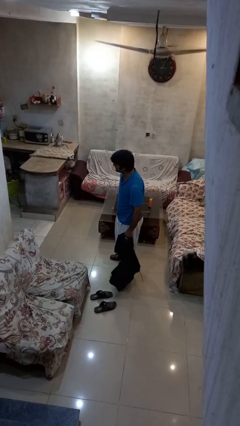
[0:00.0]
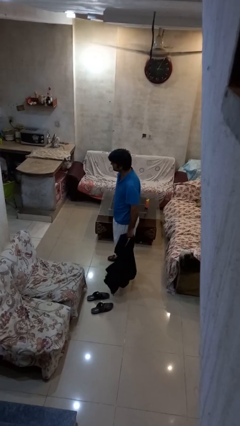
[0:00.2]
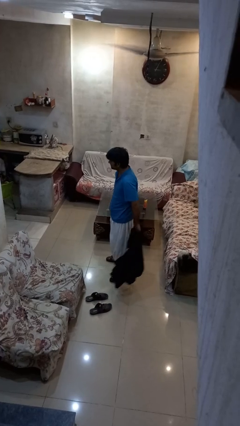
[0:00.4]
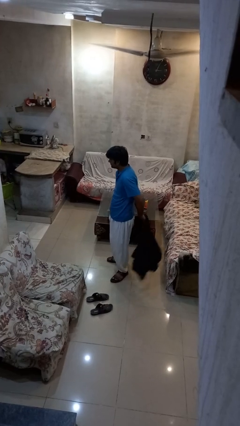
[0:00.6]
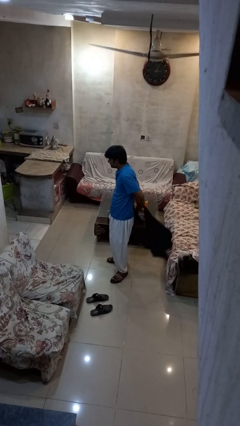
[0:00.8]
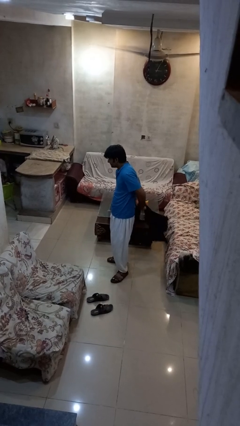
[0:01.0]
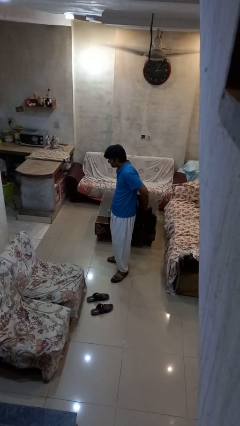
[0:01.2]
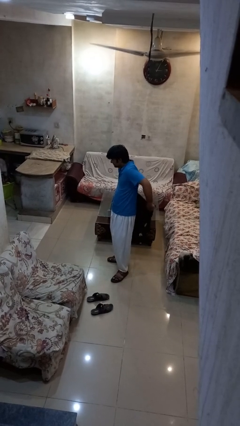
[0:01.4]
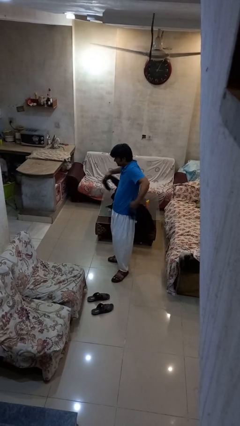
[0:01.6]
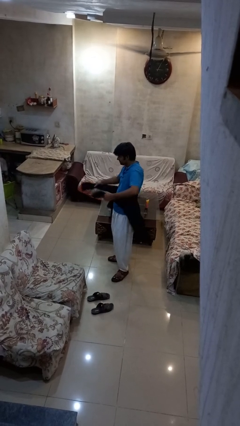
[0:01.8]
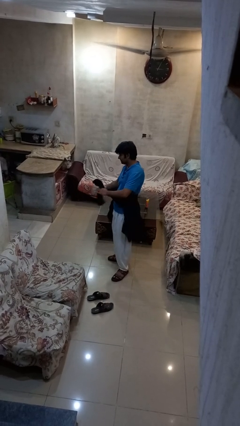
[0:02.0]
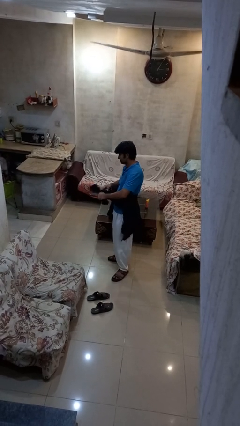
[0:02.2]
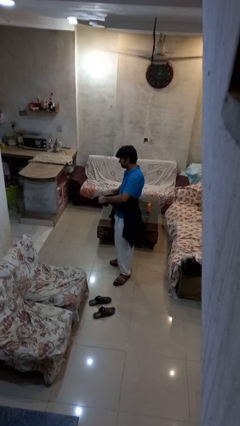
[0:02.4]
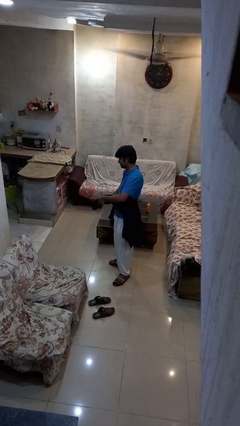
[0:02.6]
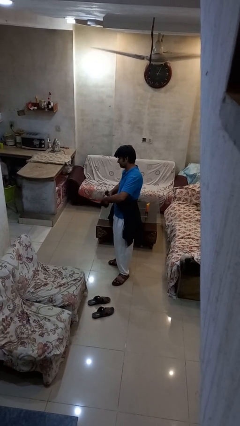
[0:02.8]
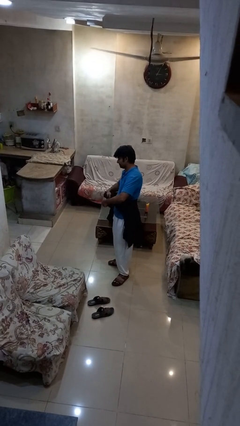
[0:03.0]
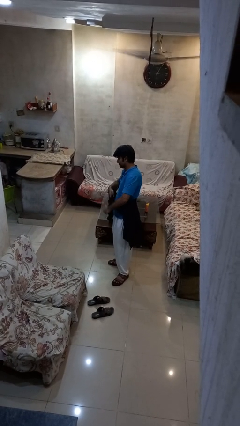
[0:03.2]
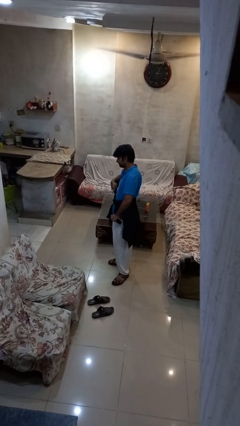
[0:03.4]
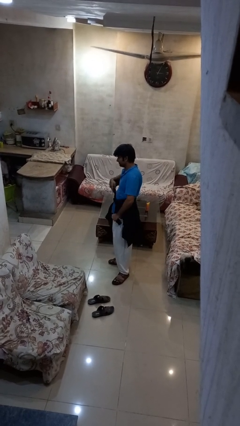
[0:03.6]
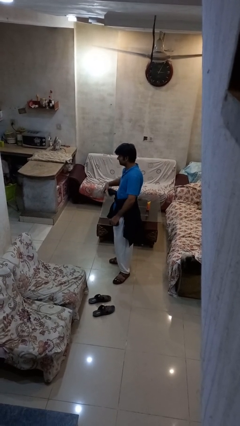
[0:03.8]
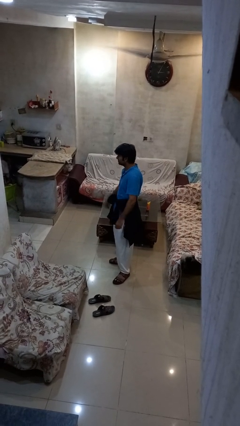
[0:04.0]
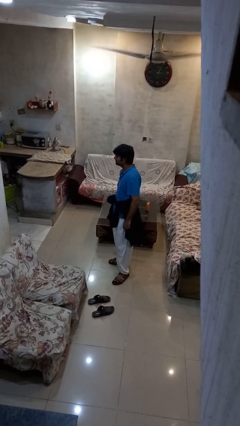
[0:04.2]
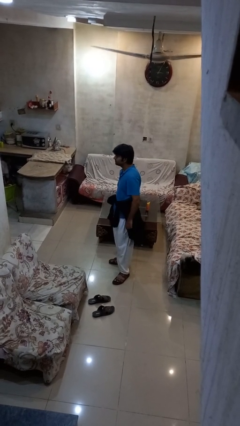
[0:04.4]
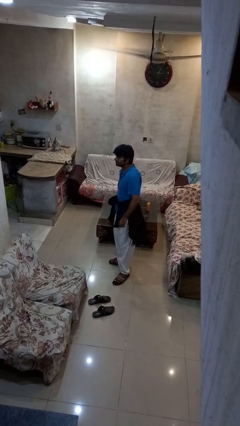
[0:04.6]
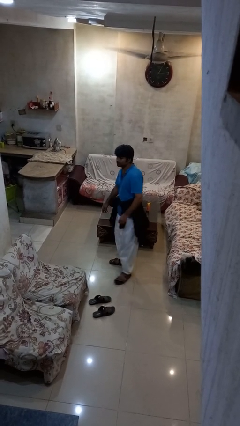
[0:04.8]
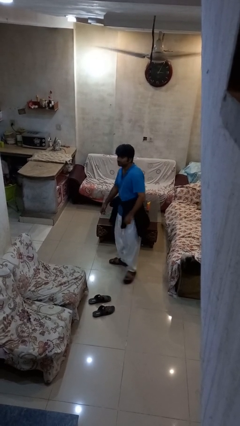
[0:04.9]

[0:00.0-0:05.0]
person ties jacket around waist

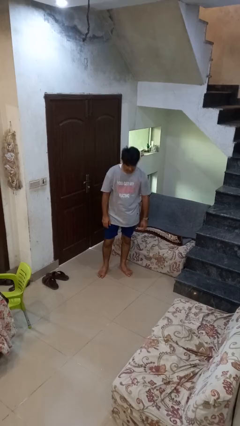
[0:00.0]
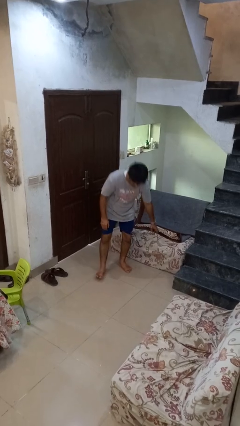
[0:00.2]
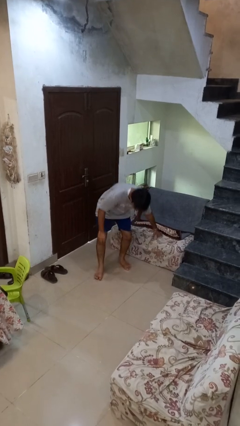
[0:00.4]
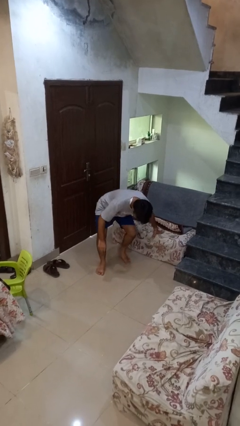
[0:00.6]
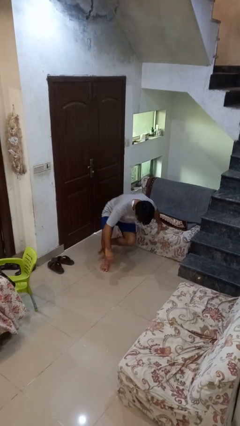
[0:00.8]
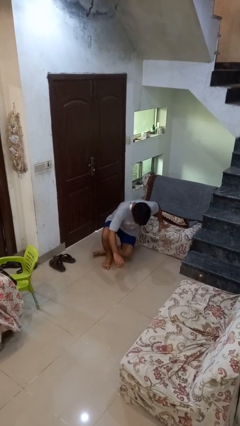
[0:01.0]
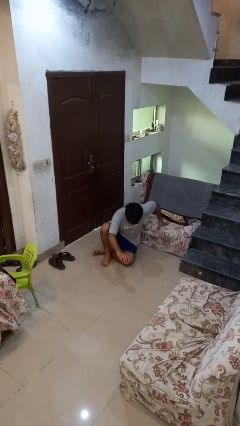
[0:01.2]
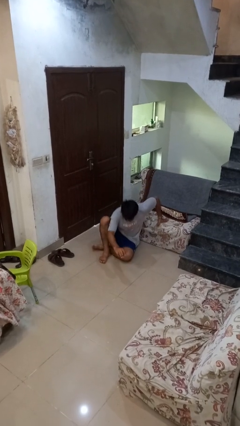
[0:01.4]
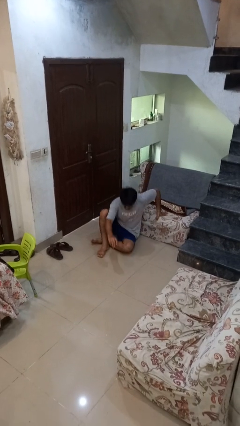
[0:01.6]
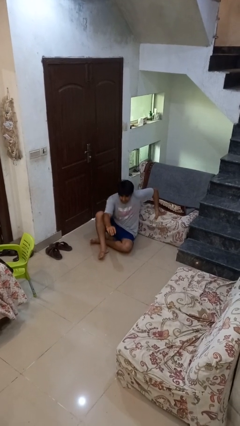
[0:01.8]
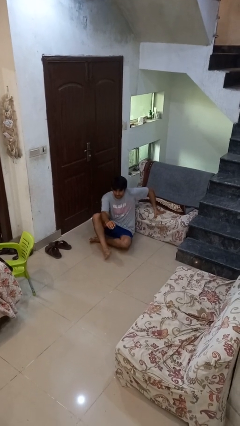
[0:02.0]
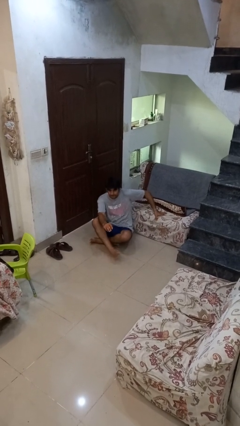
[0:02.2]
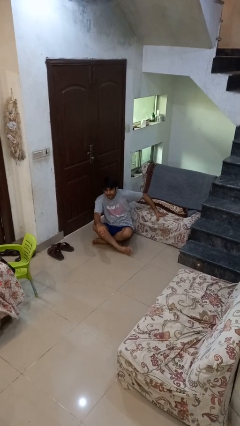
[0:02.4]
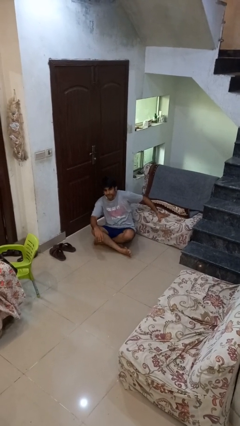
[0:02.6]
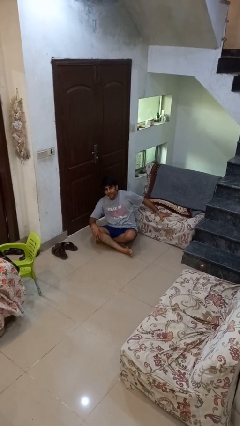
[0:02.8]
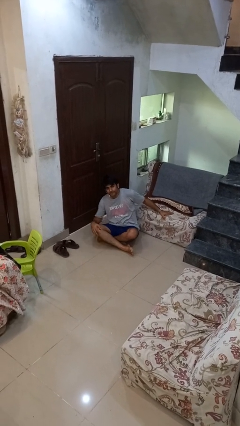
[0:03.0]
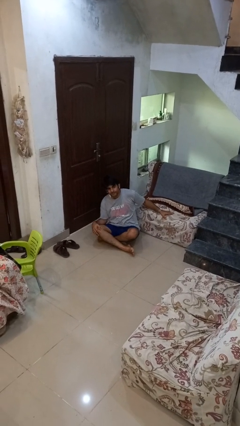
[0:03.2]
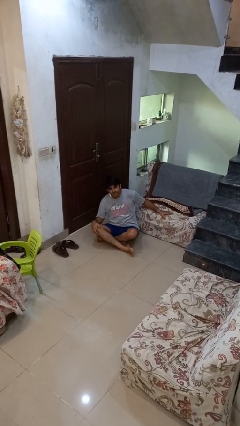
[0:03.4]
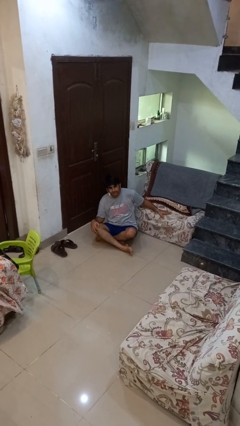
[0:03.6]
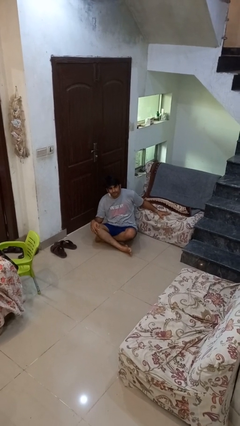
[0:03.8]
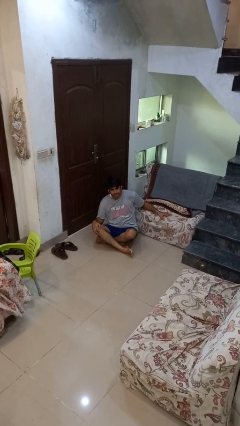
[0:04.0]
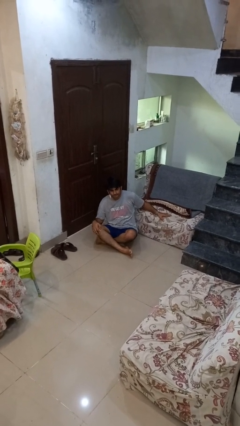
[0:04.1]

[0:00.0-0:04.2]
person sits crisscross

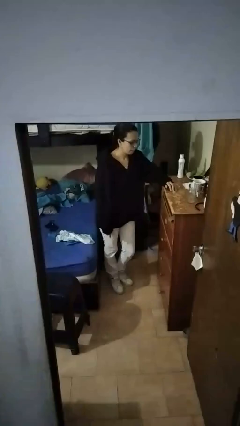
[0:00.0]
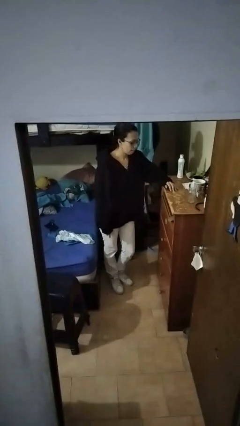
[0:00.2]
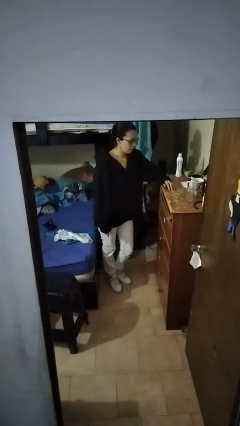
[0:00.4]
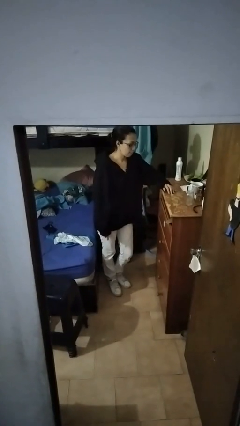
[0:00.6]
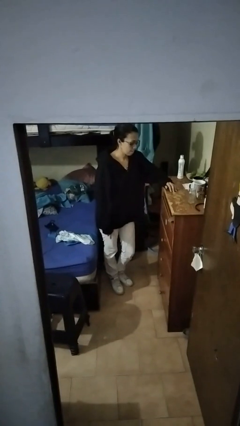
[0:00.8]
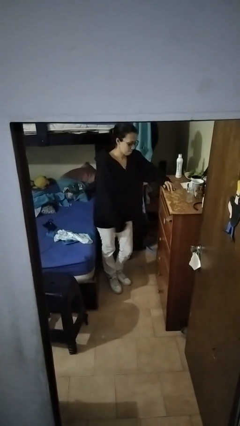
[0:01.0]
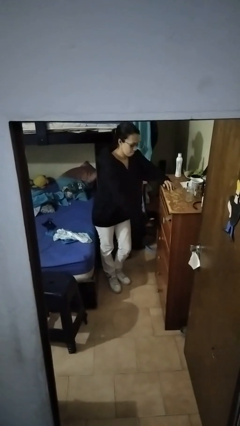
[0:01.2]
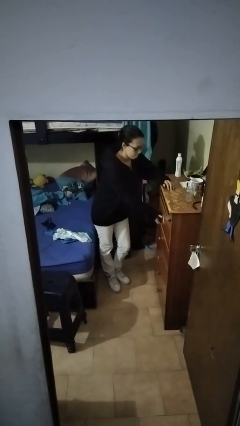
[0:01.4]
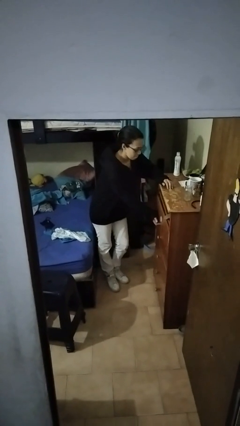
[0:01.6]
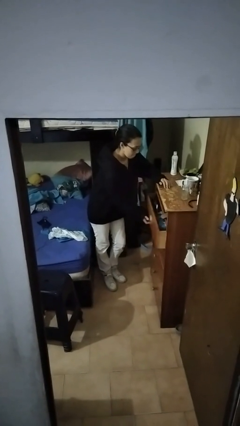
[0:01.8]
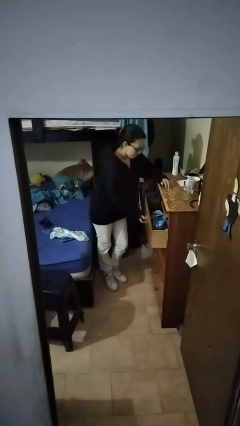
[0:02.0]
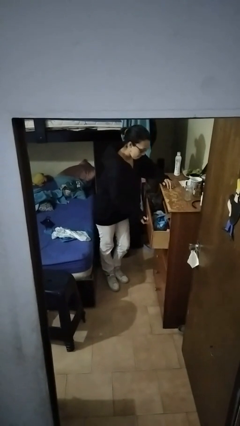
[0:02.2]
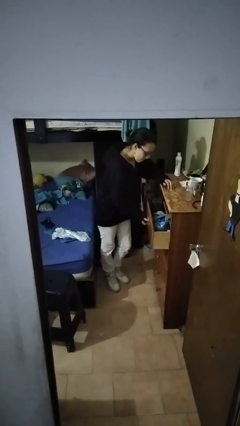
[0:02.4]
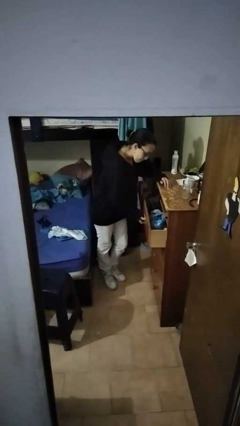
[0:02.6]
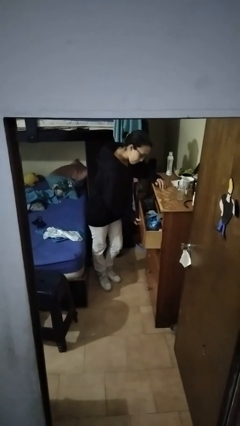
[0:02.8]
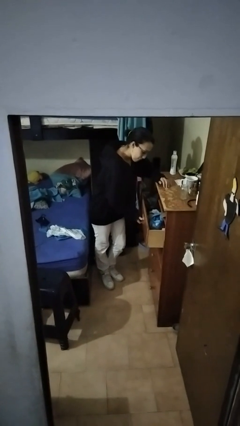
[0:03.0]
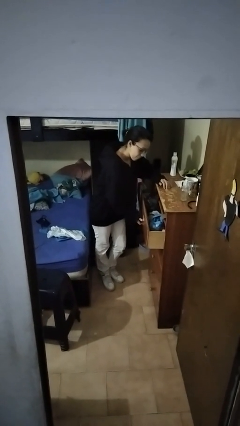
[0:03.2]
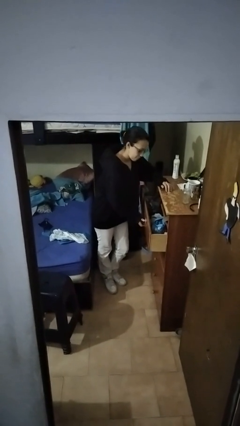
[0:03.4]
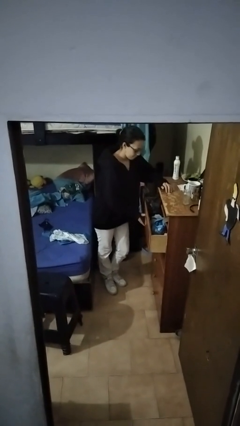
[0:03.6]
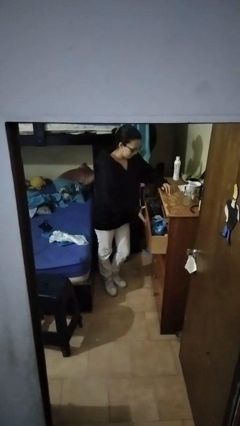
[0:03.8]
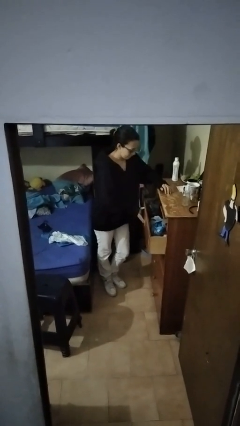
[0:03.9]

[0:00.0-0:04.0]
person opens dresser drawer

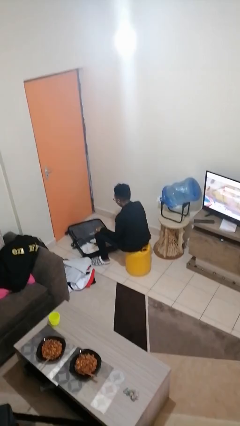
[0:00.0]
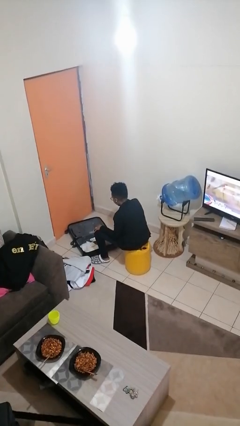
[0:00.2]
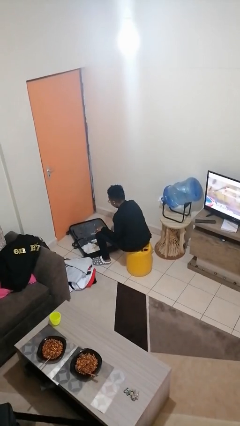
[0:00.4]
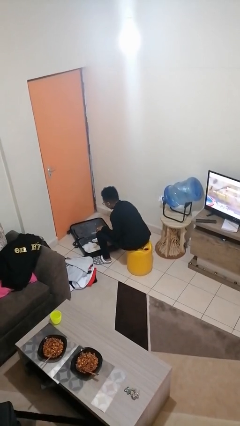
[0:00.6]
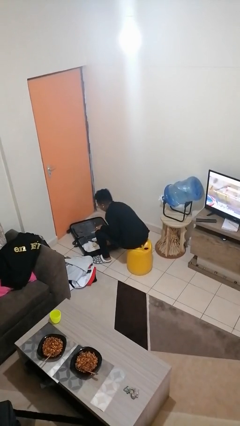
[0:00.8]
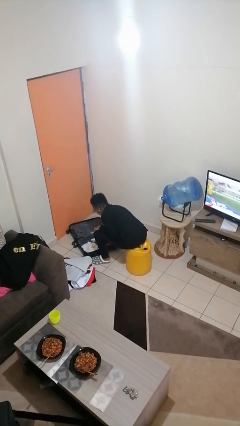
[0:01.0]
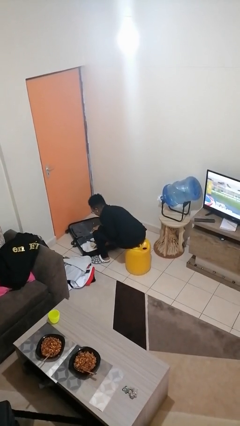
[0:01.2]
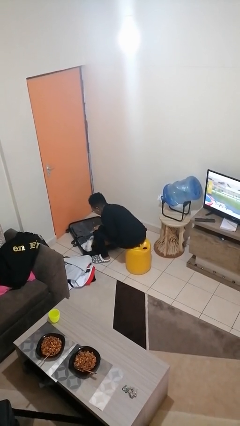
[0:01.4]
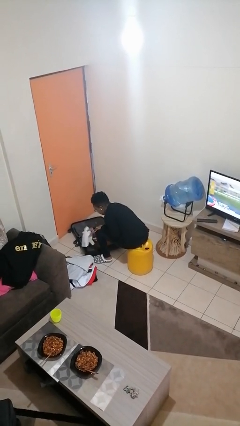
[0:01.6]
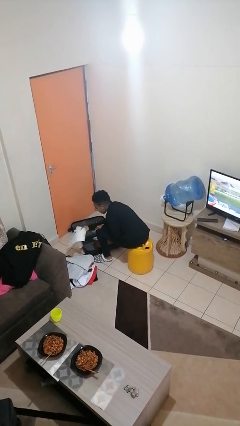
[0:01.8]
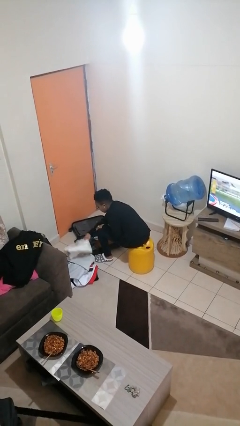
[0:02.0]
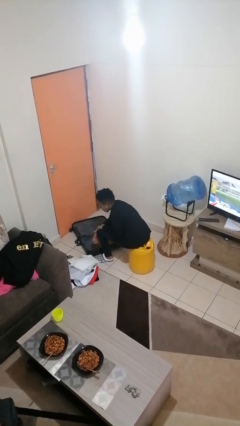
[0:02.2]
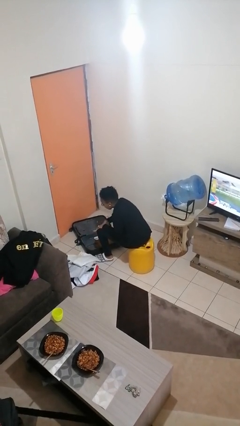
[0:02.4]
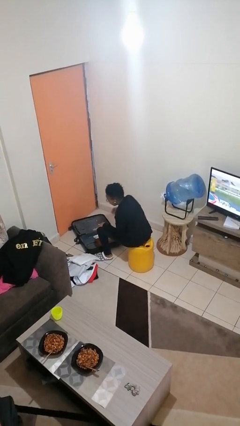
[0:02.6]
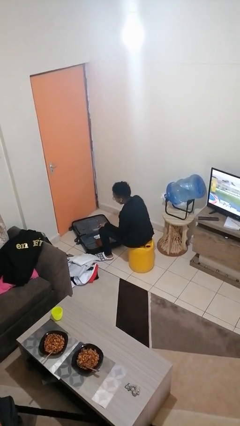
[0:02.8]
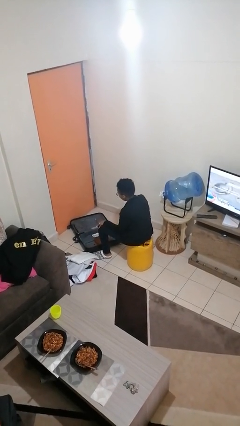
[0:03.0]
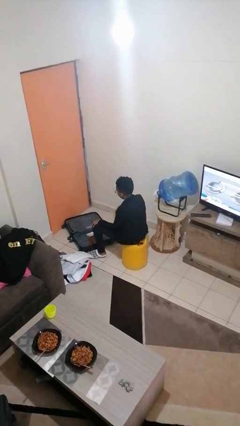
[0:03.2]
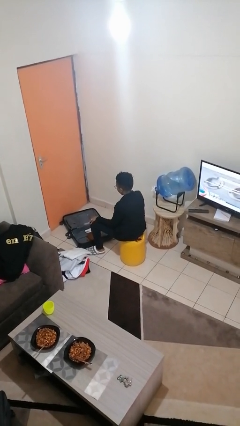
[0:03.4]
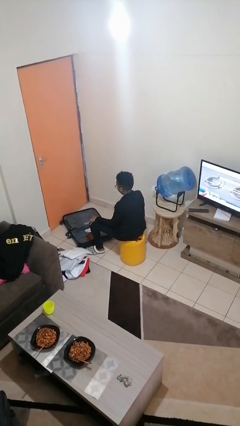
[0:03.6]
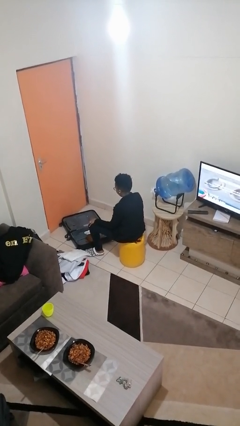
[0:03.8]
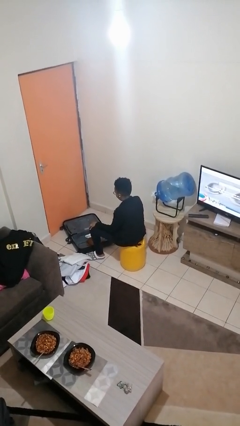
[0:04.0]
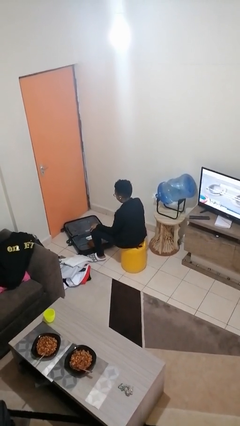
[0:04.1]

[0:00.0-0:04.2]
person unloads clothes from suitcase

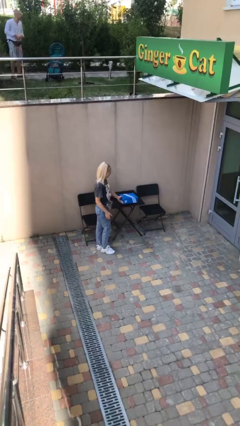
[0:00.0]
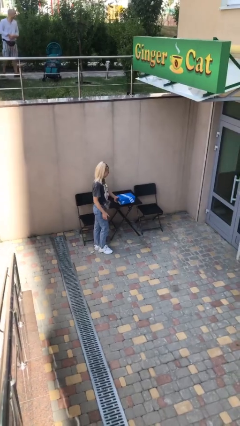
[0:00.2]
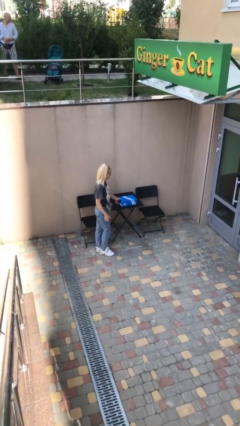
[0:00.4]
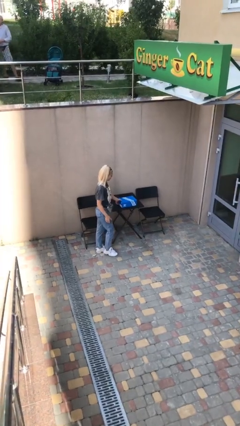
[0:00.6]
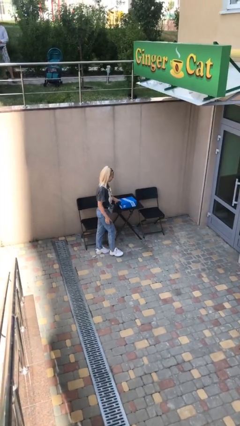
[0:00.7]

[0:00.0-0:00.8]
person puts down object on table
